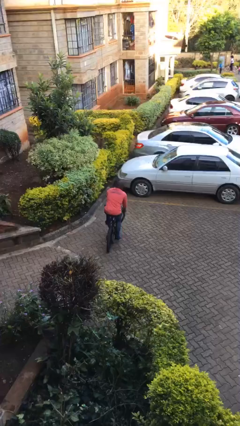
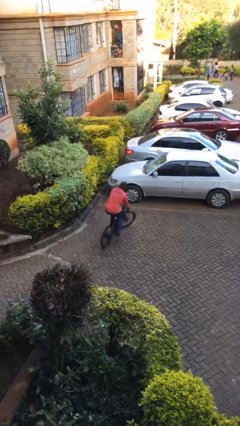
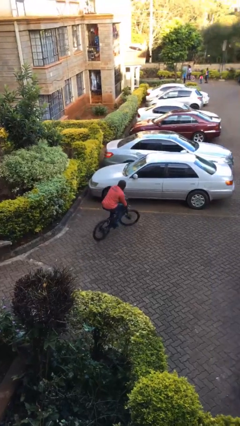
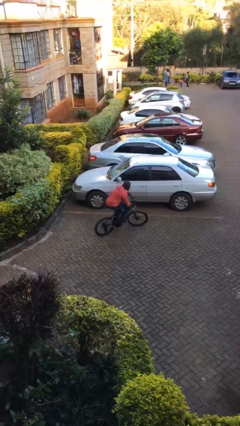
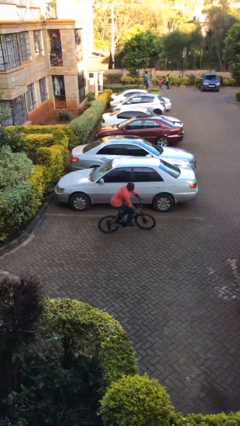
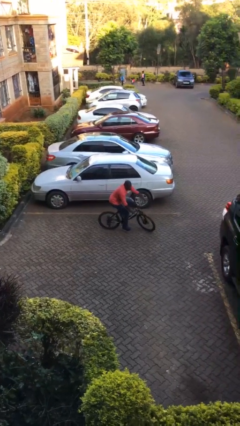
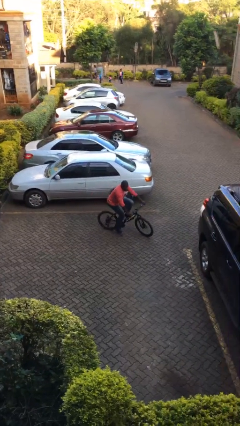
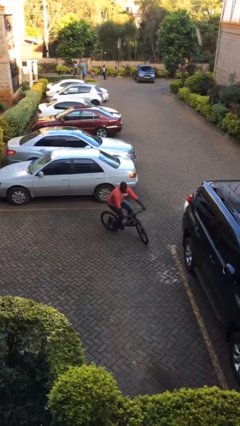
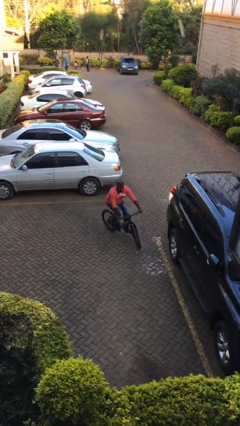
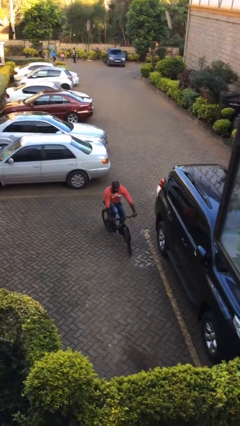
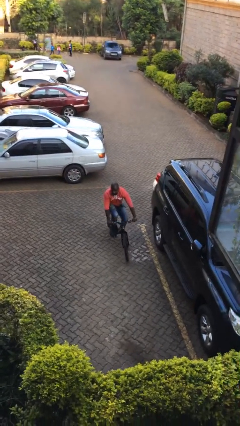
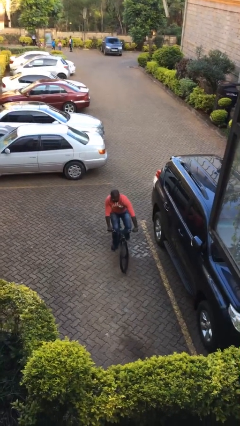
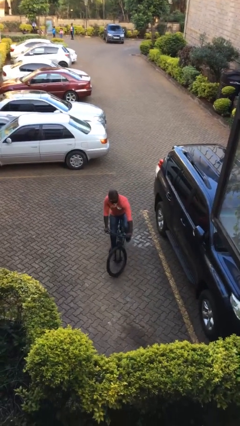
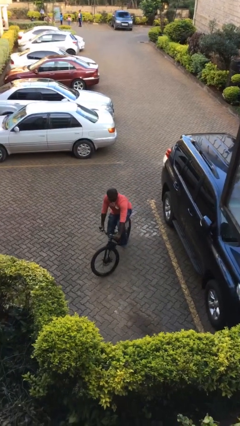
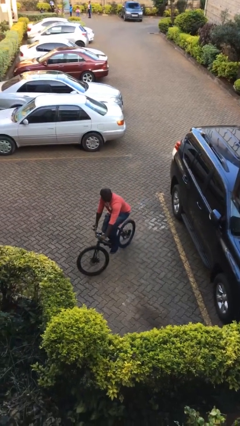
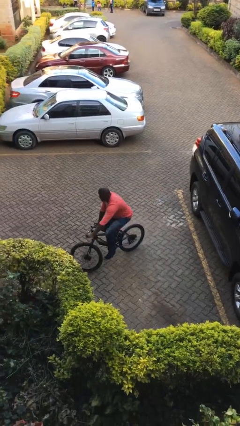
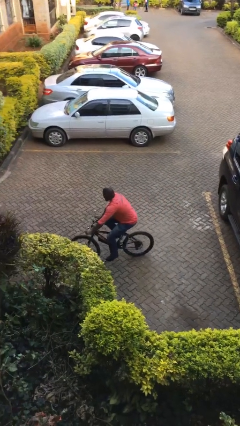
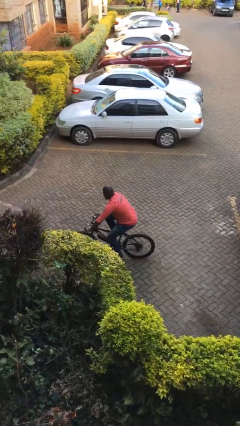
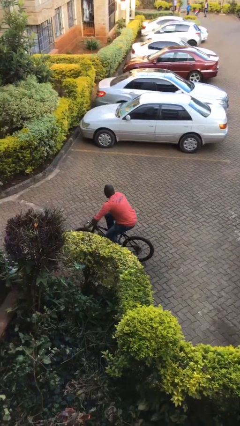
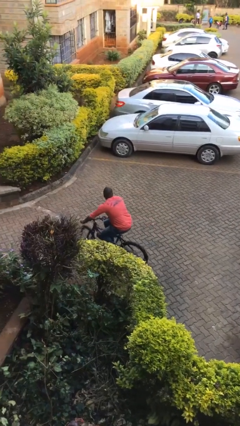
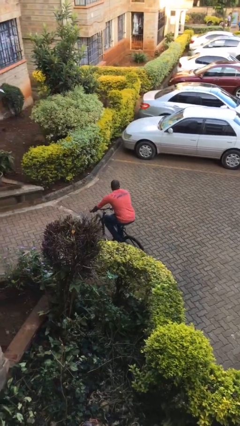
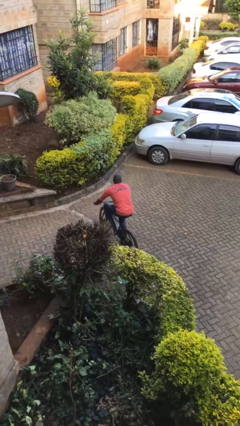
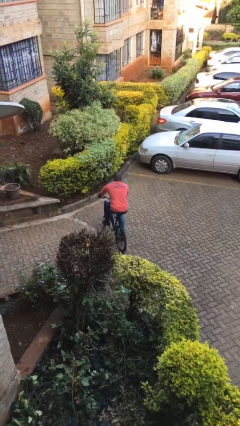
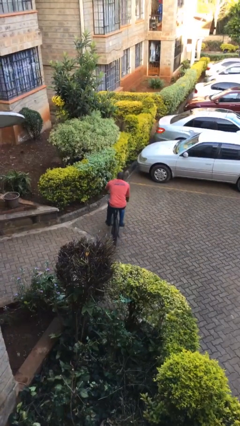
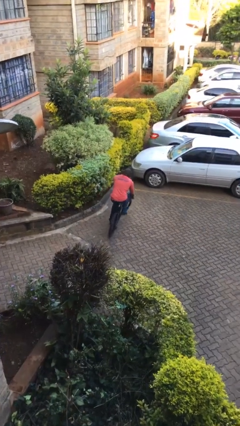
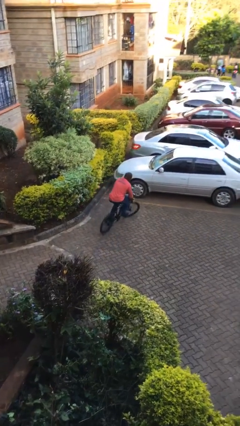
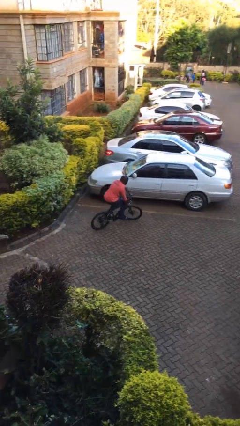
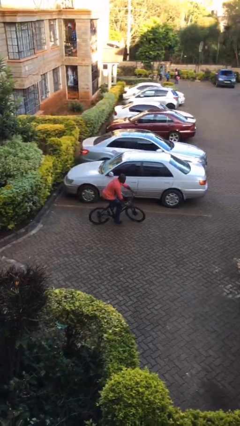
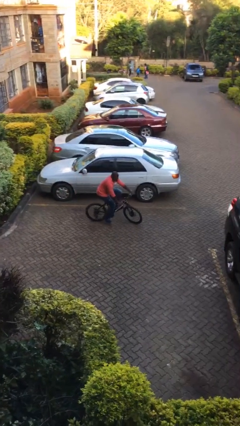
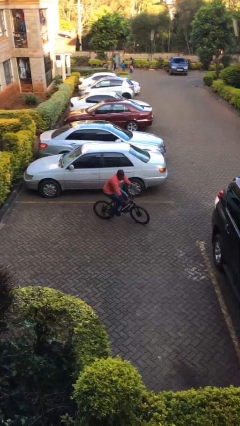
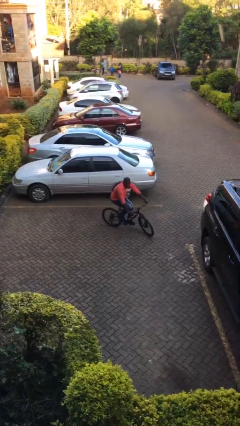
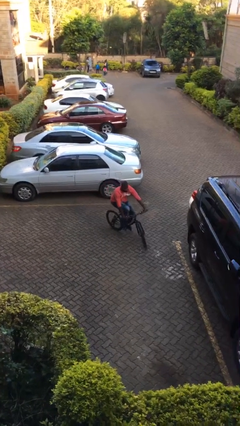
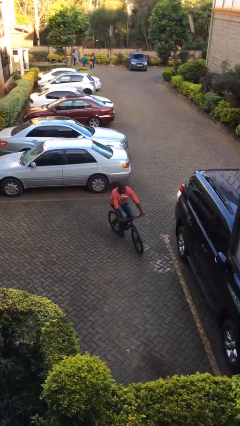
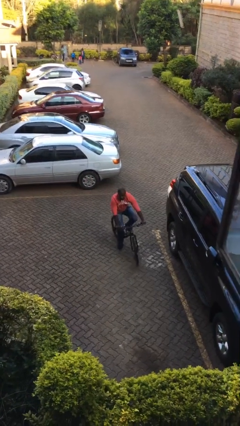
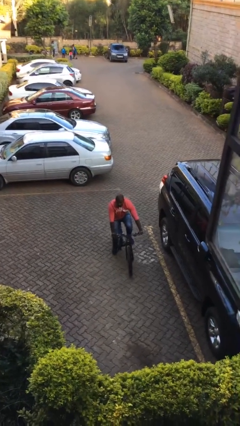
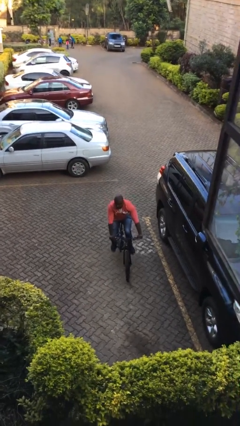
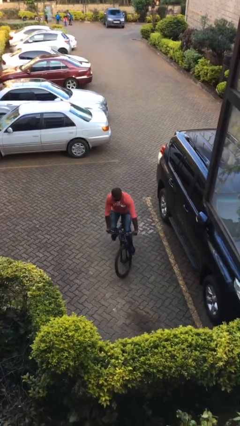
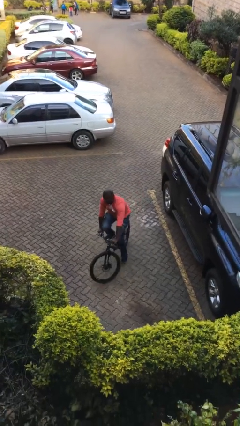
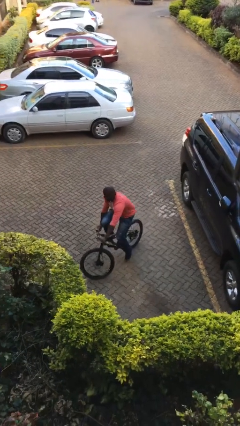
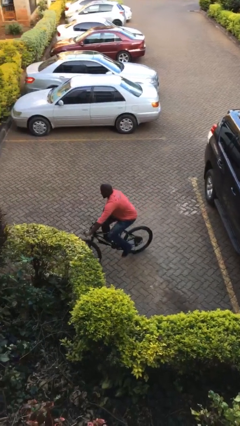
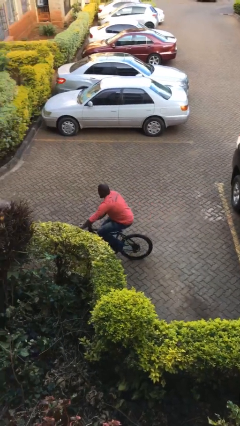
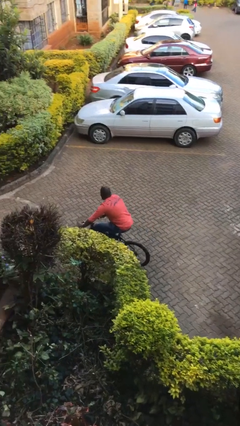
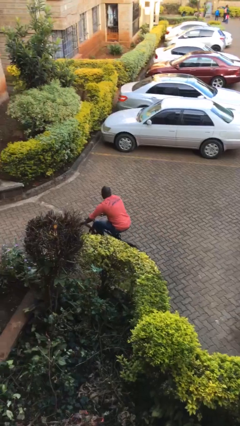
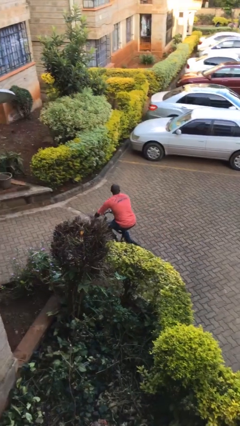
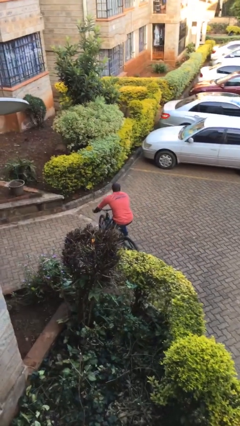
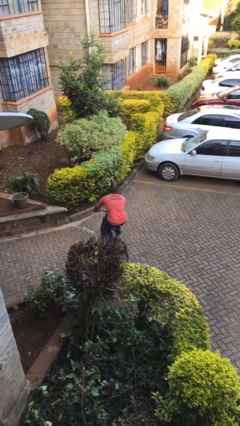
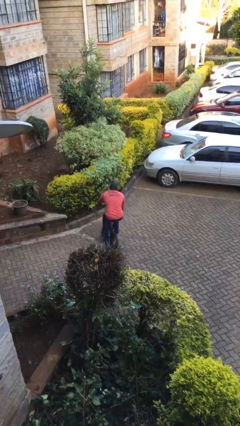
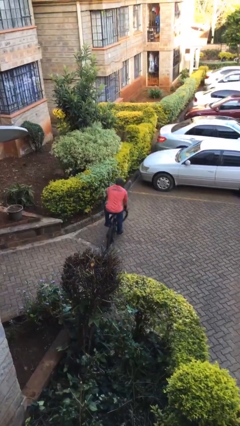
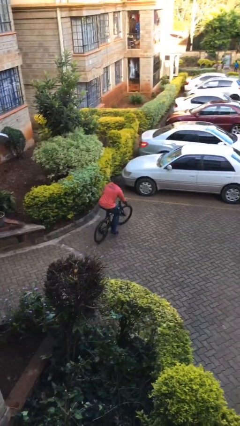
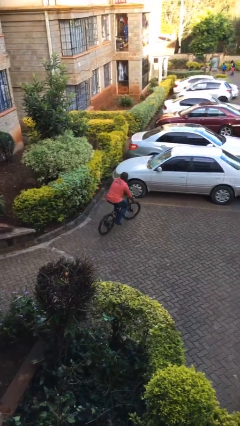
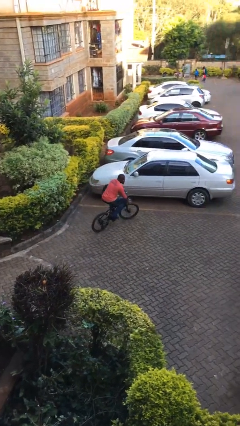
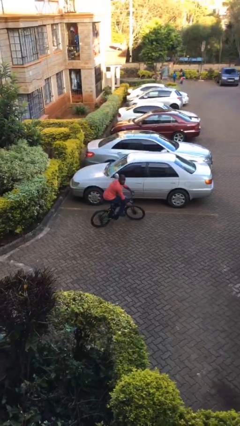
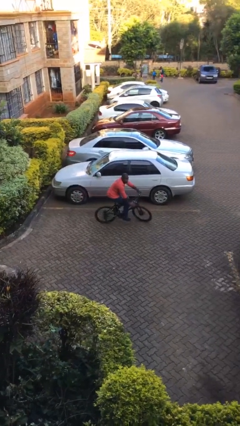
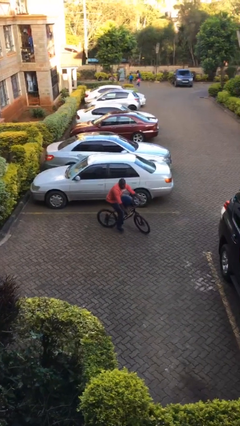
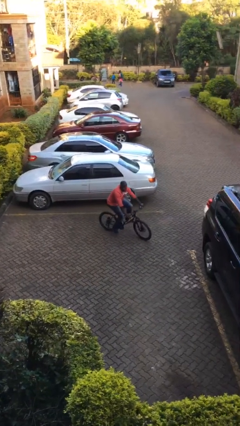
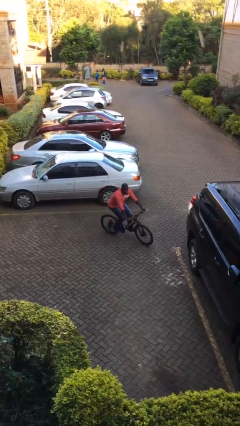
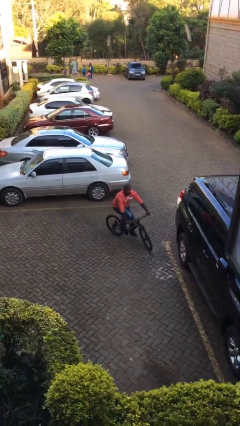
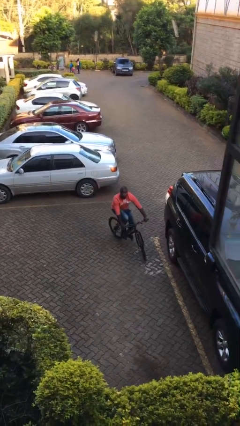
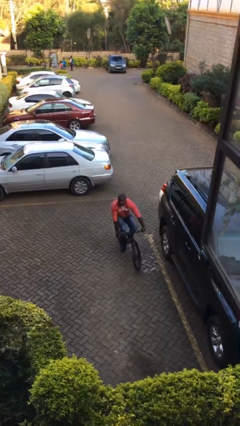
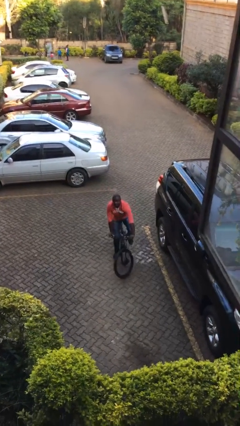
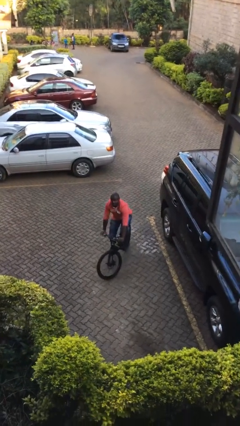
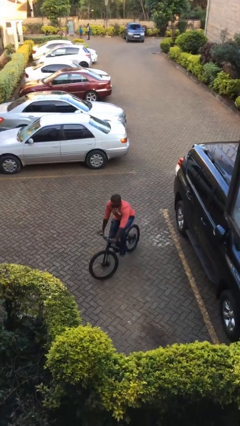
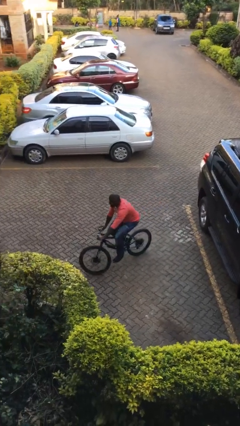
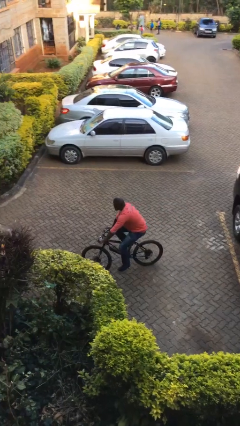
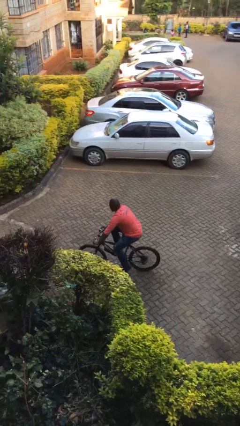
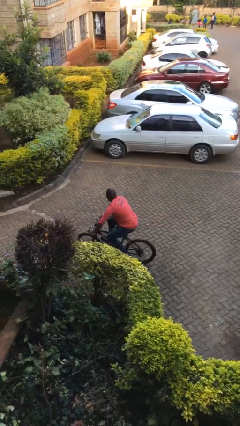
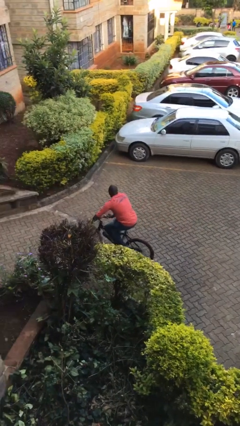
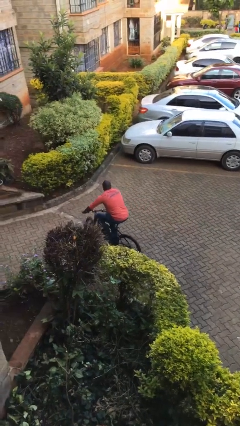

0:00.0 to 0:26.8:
person rides bicycle

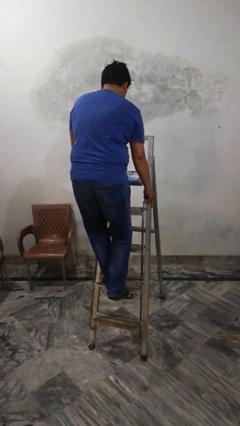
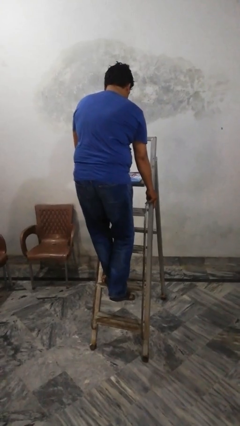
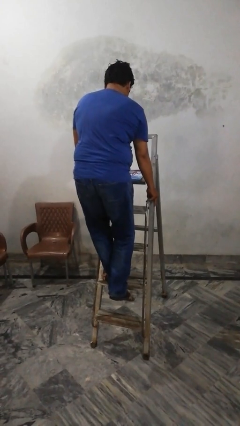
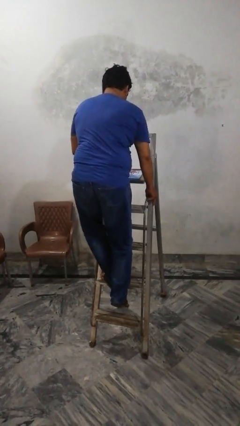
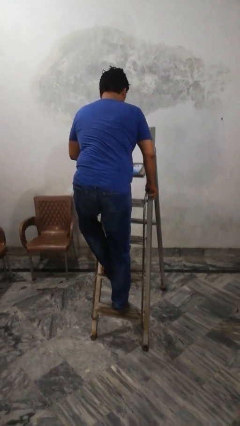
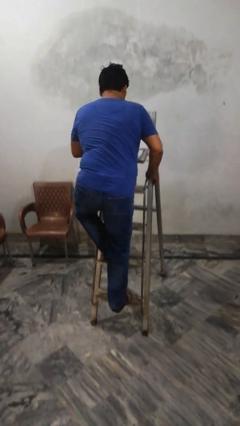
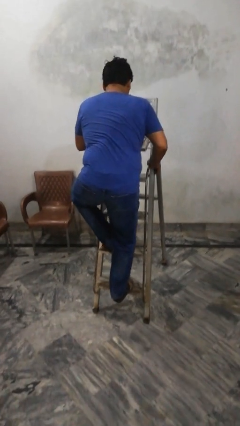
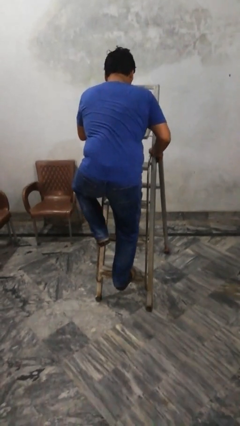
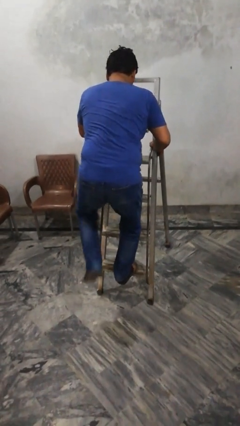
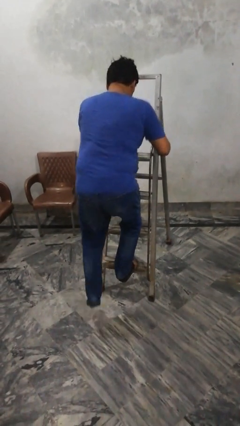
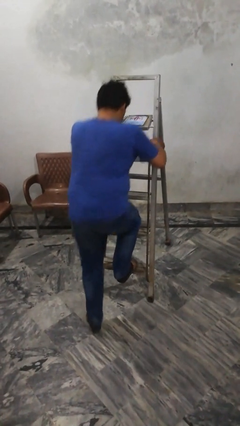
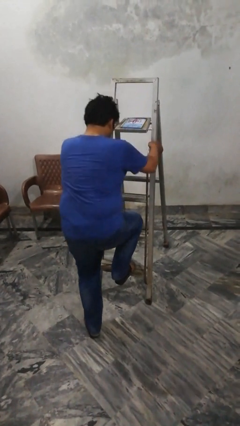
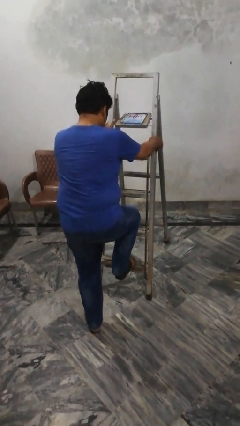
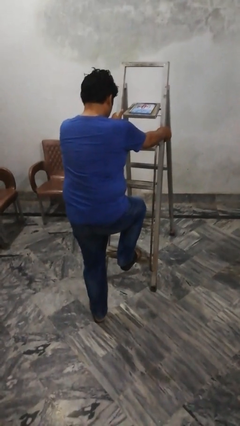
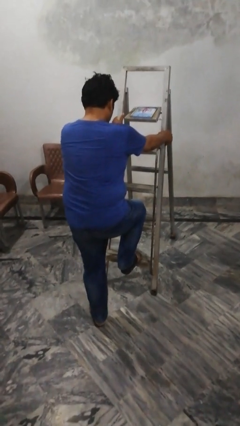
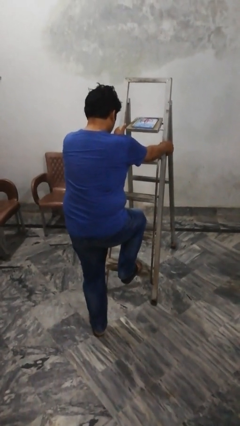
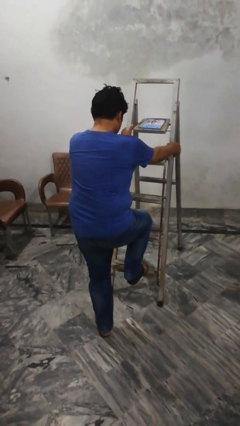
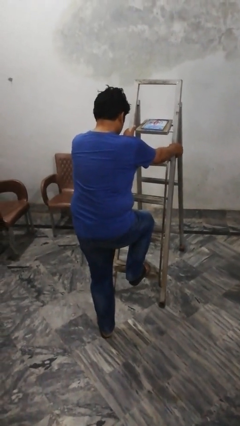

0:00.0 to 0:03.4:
person climbs down ladder

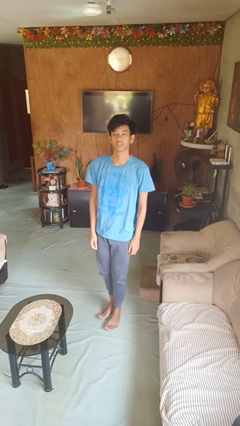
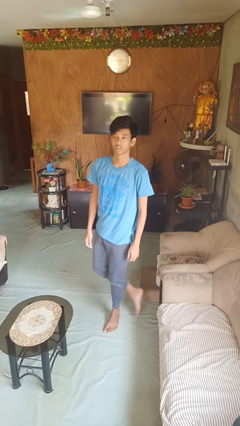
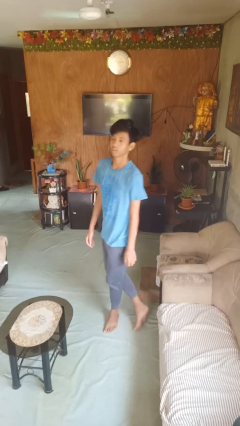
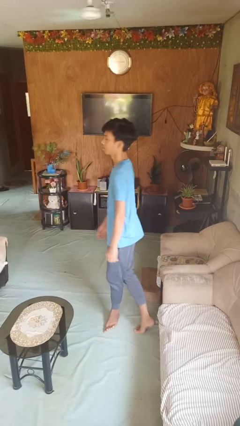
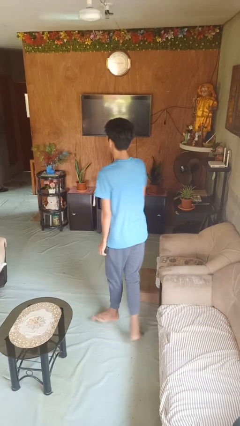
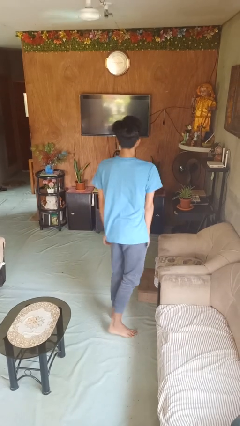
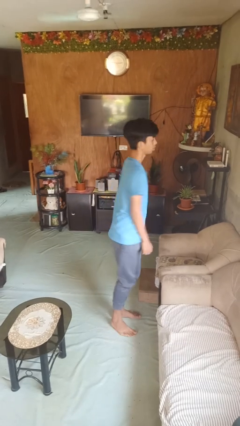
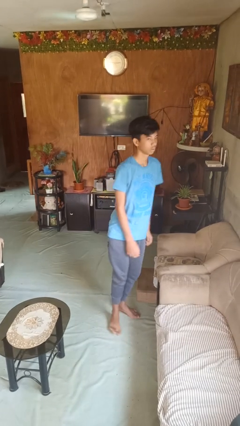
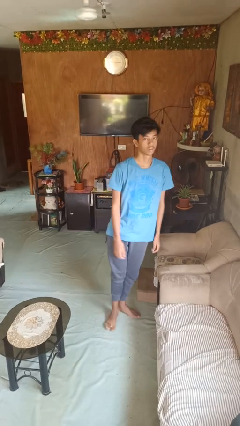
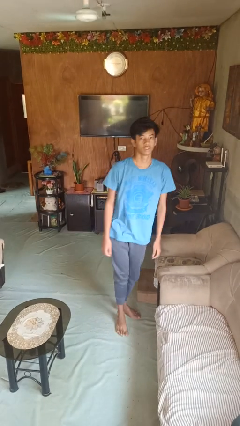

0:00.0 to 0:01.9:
person twirls
